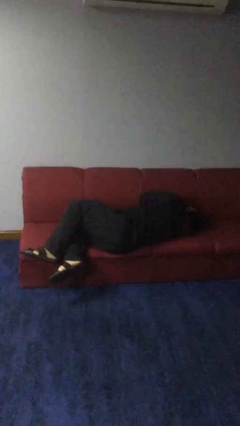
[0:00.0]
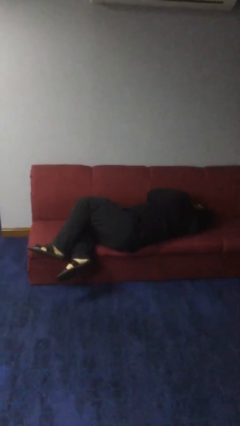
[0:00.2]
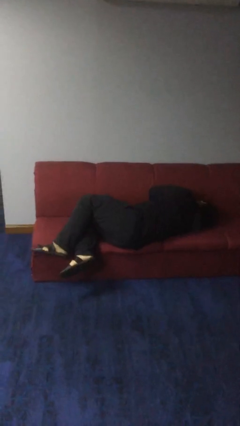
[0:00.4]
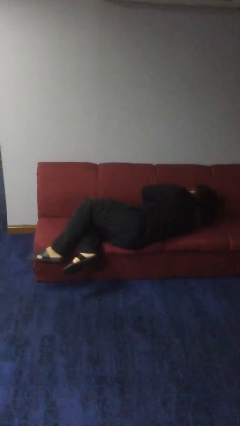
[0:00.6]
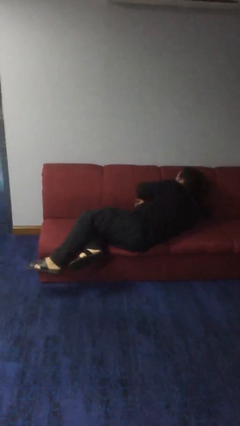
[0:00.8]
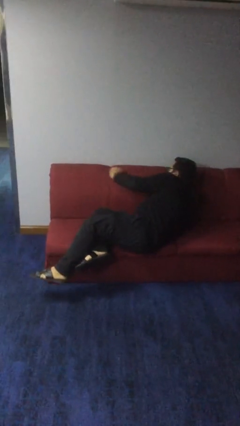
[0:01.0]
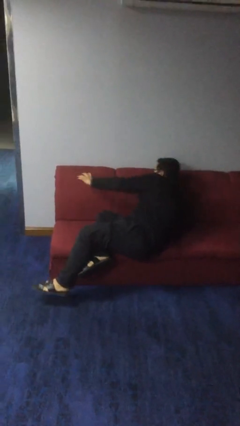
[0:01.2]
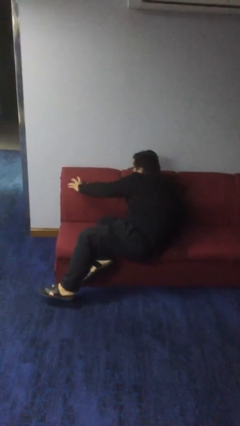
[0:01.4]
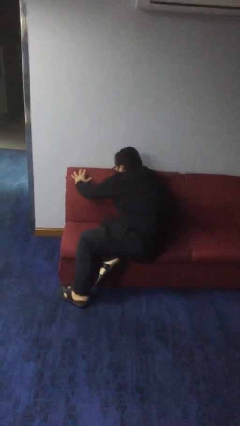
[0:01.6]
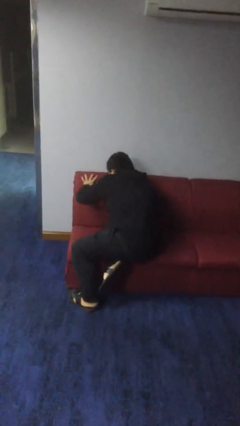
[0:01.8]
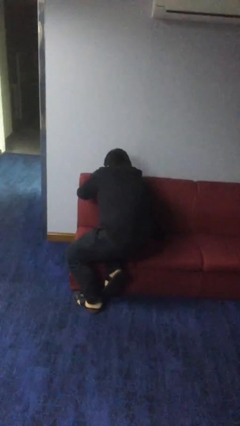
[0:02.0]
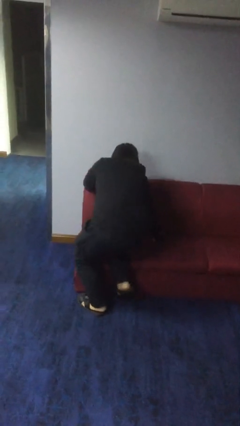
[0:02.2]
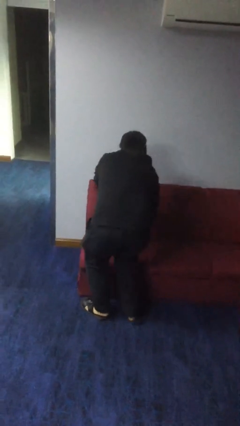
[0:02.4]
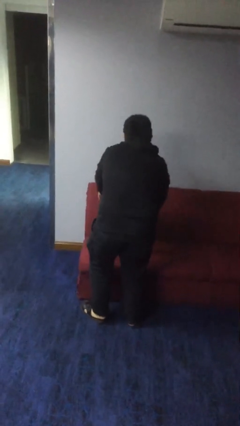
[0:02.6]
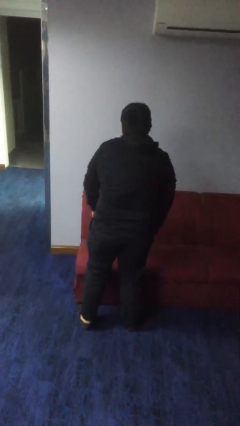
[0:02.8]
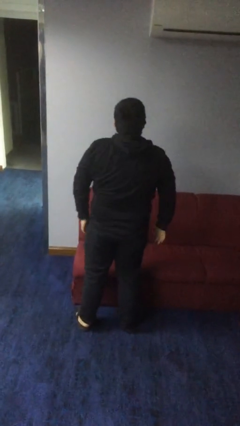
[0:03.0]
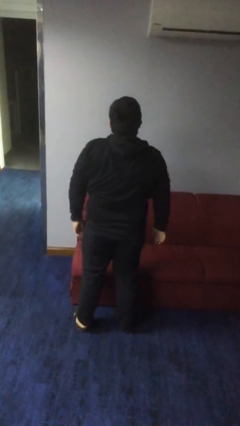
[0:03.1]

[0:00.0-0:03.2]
person stands up

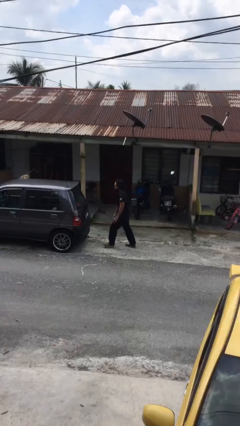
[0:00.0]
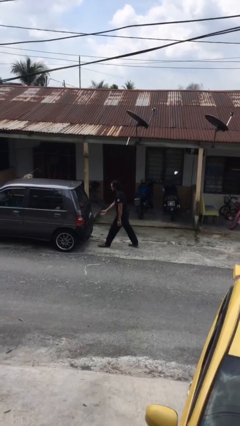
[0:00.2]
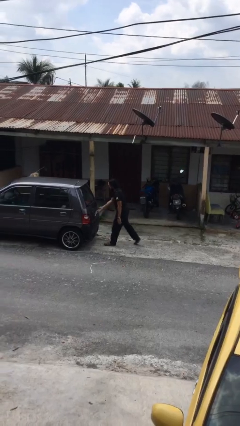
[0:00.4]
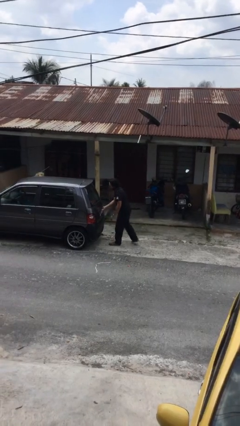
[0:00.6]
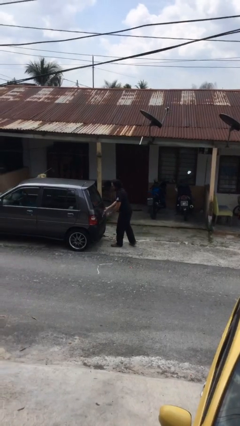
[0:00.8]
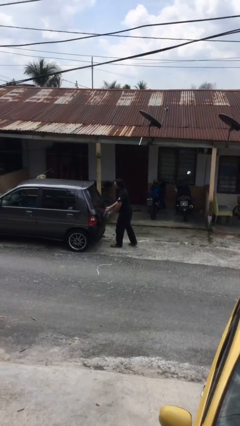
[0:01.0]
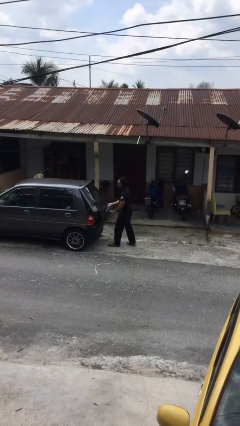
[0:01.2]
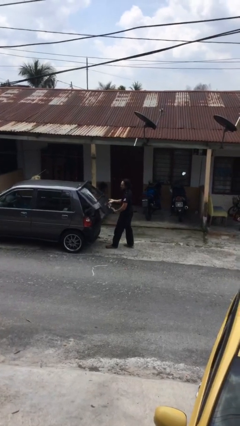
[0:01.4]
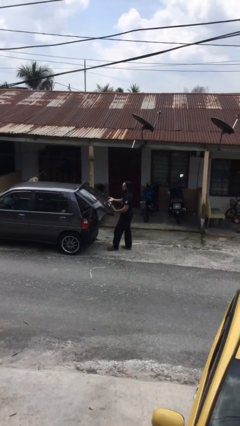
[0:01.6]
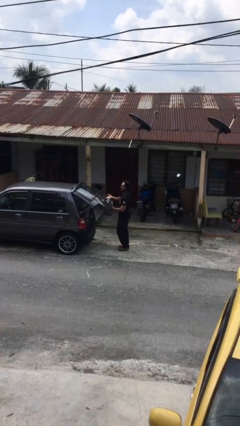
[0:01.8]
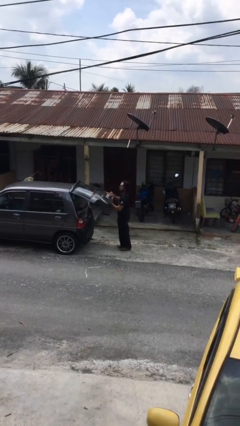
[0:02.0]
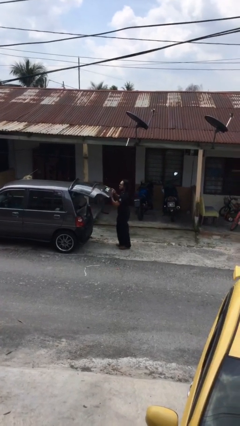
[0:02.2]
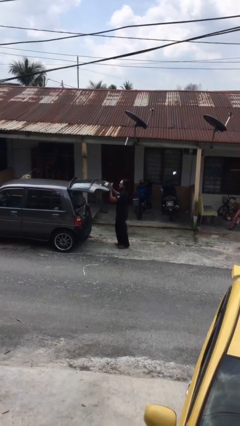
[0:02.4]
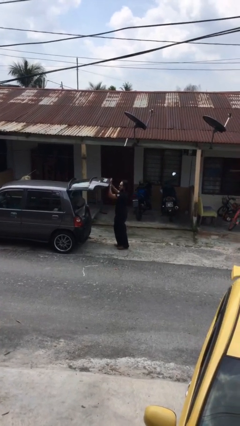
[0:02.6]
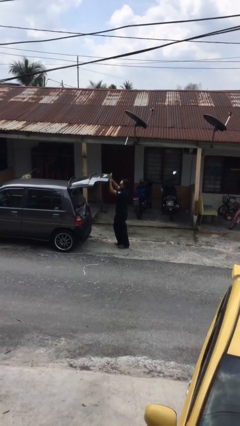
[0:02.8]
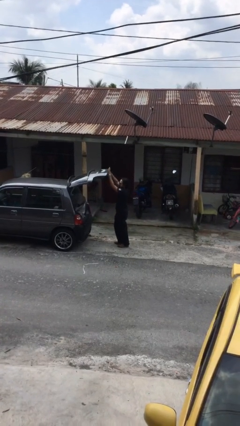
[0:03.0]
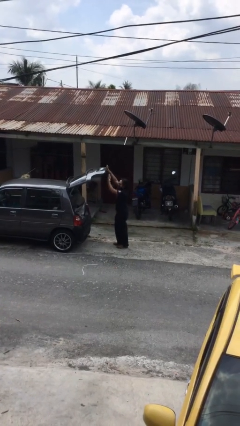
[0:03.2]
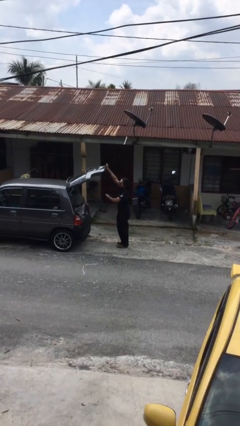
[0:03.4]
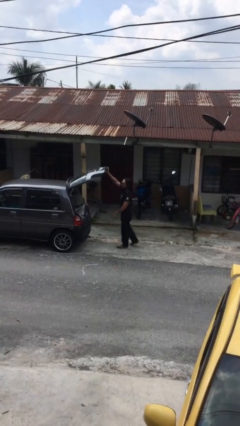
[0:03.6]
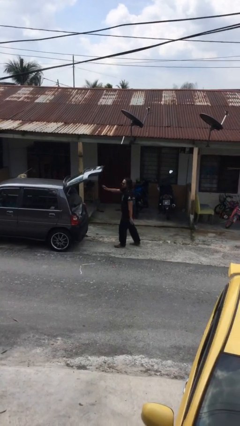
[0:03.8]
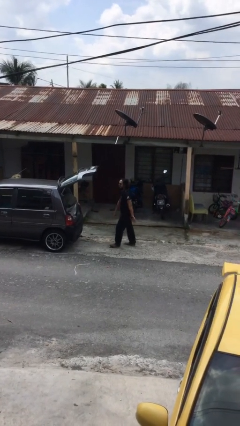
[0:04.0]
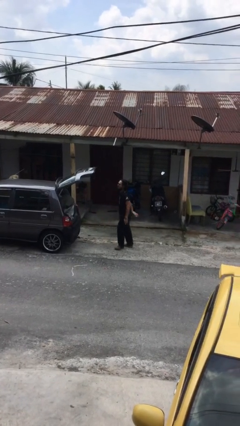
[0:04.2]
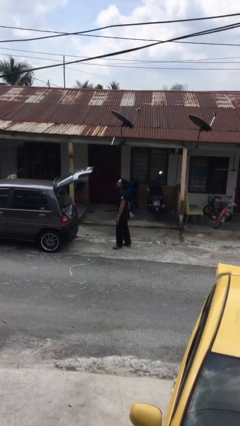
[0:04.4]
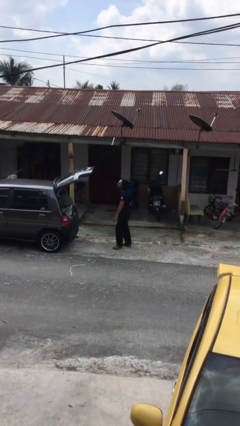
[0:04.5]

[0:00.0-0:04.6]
person opens car trunk

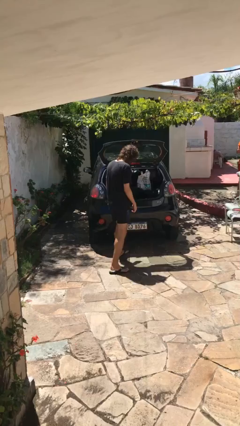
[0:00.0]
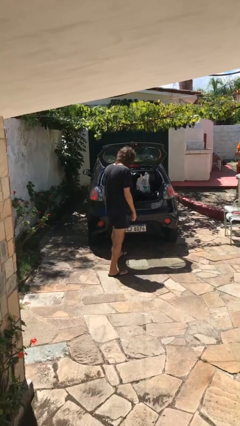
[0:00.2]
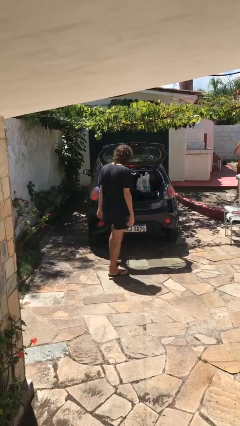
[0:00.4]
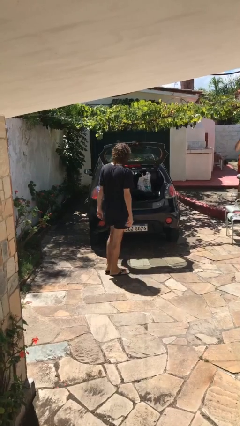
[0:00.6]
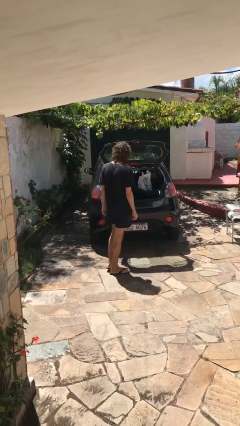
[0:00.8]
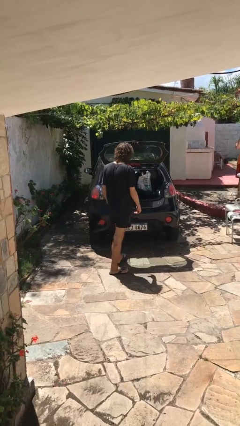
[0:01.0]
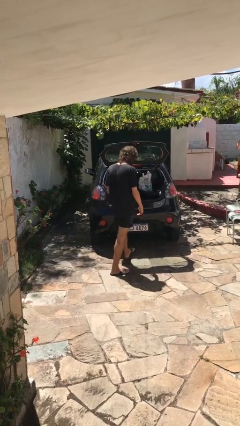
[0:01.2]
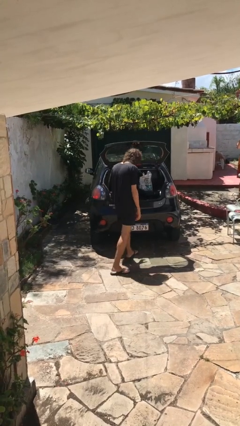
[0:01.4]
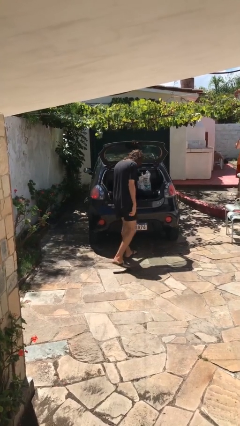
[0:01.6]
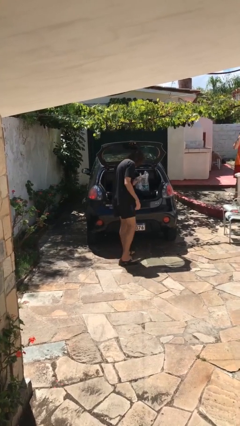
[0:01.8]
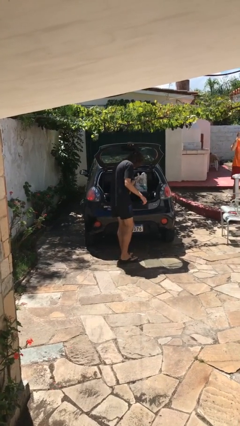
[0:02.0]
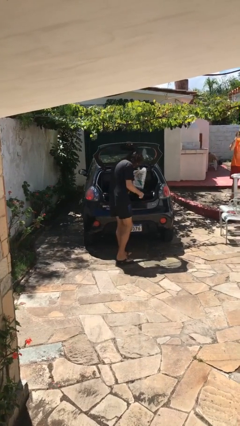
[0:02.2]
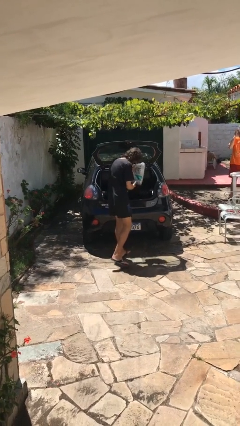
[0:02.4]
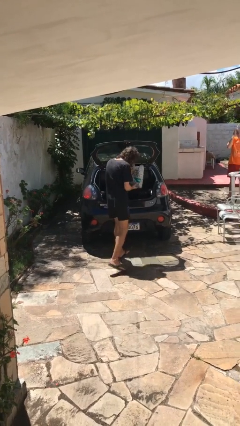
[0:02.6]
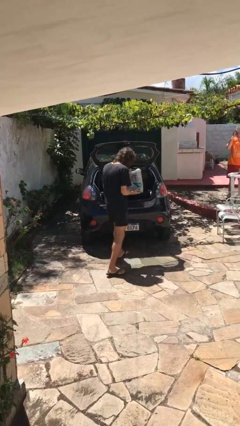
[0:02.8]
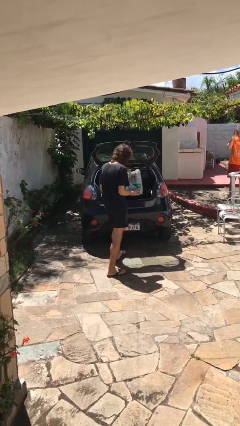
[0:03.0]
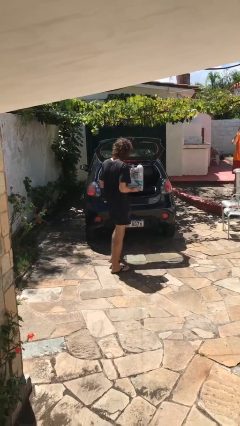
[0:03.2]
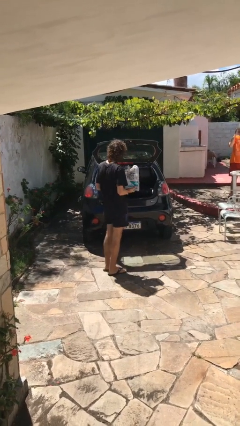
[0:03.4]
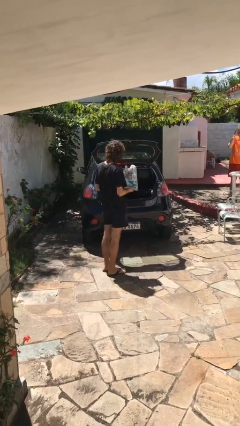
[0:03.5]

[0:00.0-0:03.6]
person unloads car

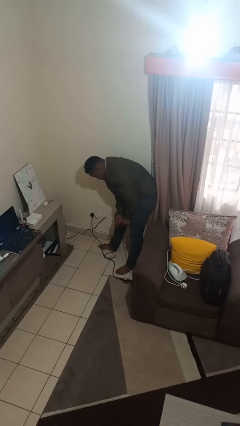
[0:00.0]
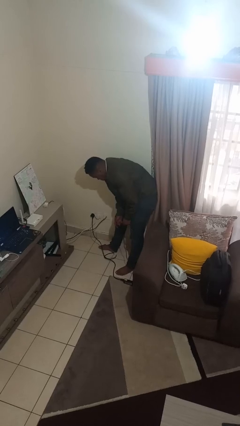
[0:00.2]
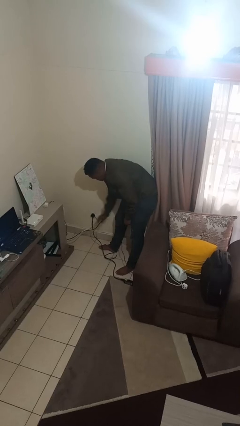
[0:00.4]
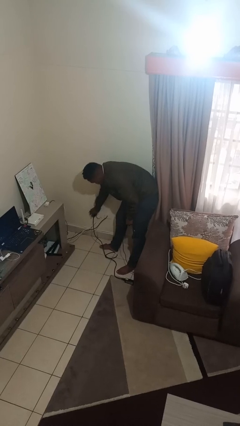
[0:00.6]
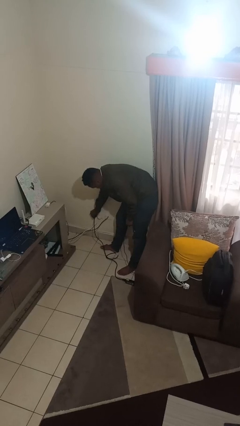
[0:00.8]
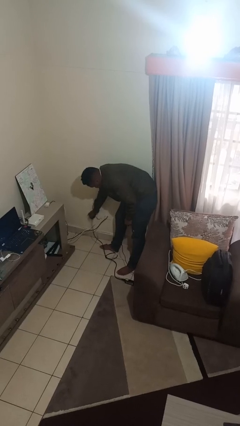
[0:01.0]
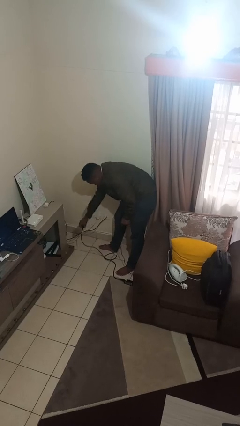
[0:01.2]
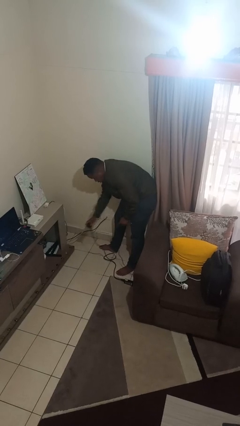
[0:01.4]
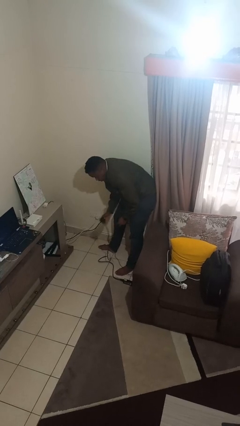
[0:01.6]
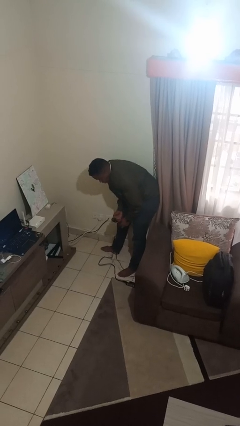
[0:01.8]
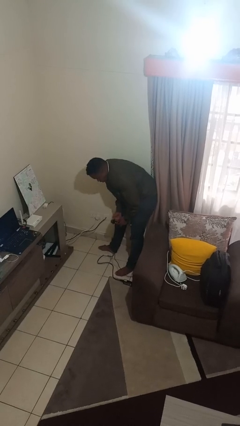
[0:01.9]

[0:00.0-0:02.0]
person unplugs from electrical socket

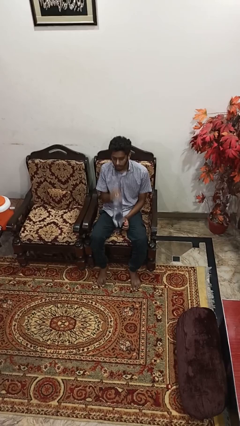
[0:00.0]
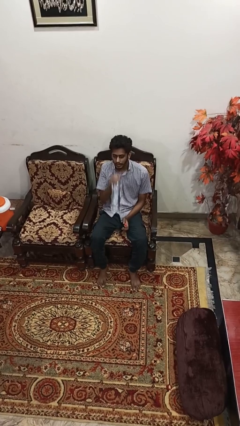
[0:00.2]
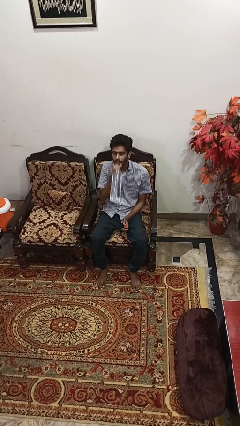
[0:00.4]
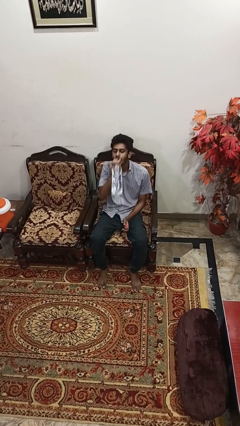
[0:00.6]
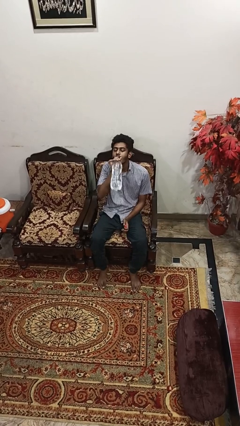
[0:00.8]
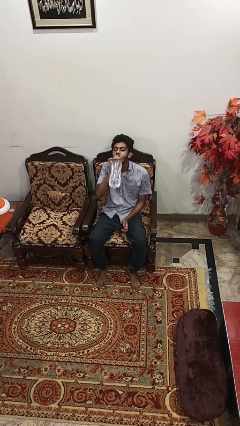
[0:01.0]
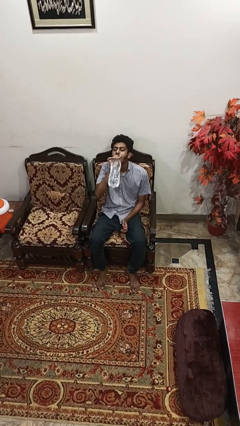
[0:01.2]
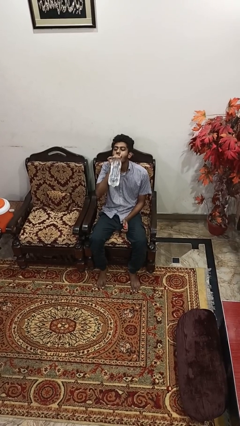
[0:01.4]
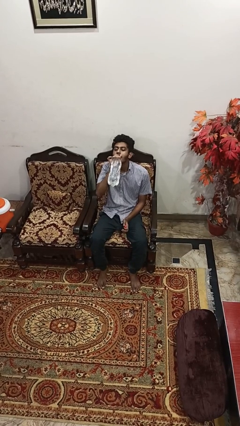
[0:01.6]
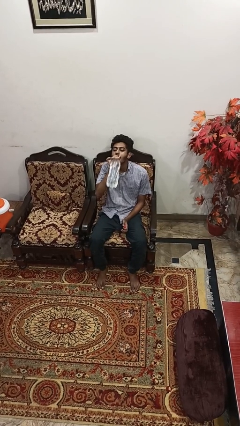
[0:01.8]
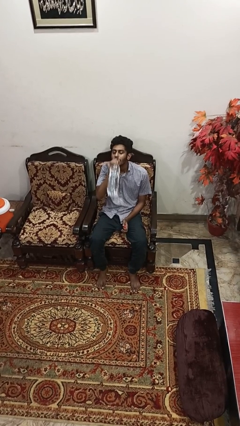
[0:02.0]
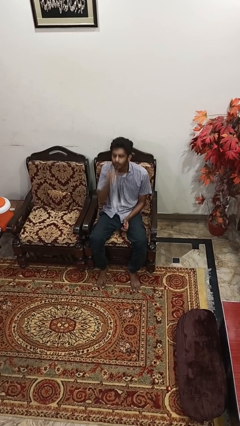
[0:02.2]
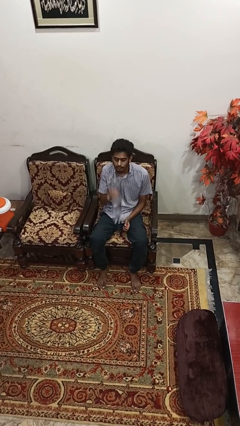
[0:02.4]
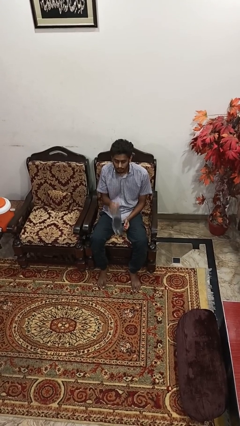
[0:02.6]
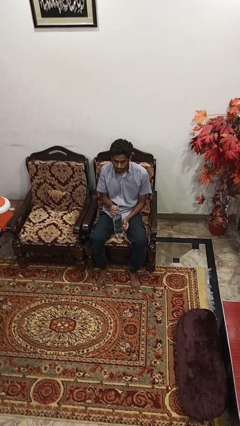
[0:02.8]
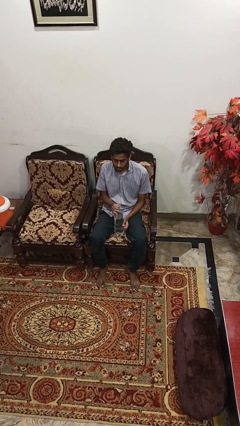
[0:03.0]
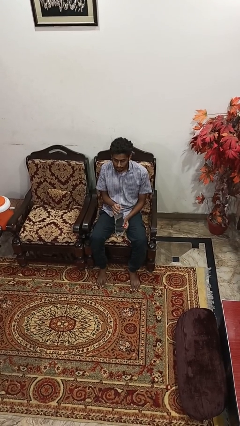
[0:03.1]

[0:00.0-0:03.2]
person drinks from bottle

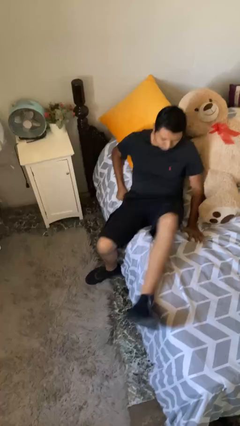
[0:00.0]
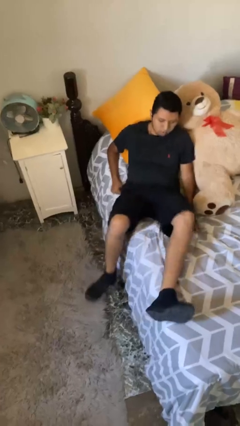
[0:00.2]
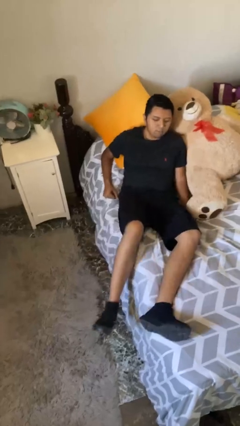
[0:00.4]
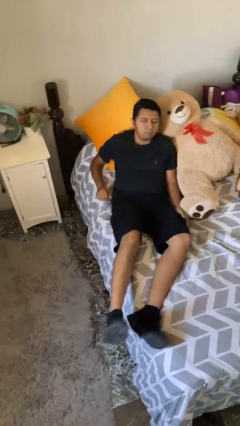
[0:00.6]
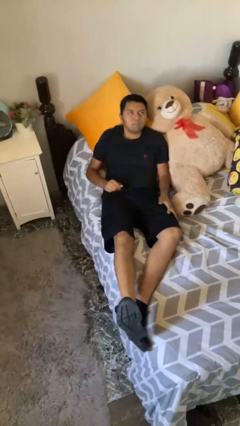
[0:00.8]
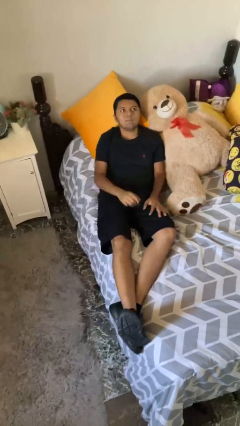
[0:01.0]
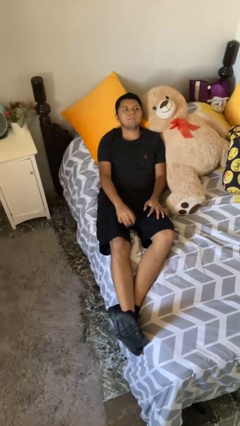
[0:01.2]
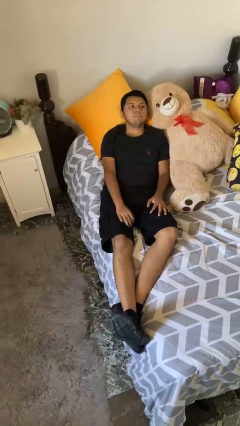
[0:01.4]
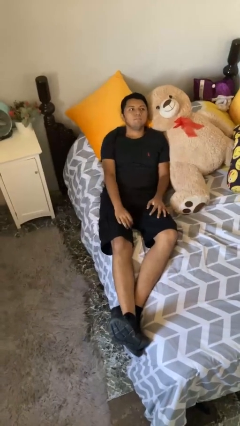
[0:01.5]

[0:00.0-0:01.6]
person lies down on bed
